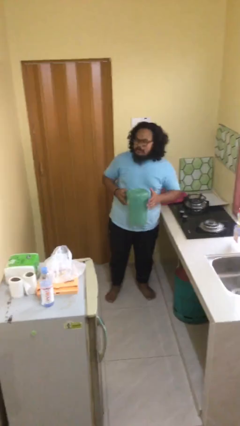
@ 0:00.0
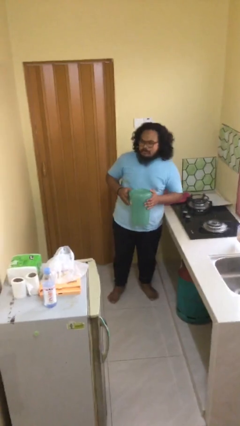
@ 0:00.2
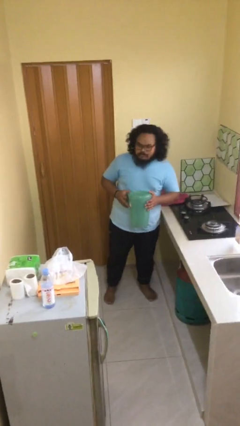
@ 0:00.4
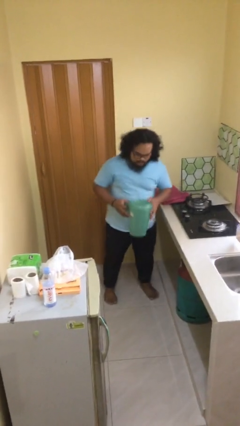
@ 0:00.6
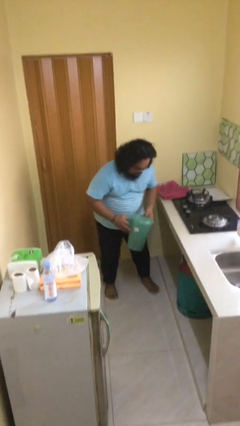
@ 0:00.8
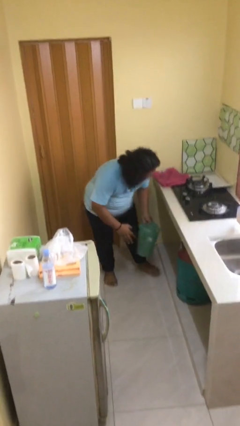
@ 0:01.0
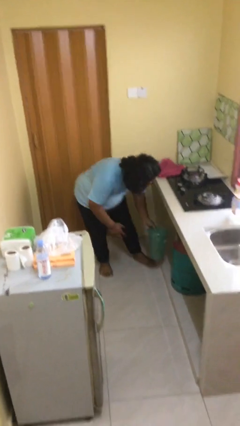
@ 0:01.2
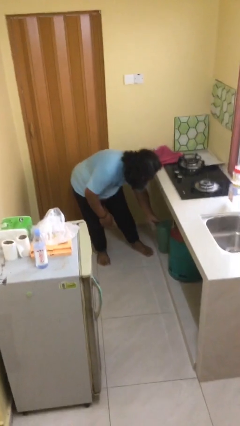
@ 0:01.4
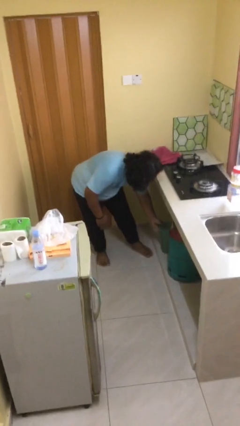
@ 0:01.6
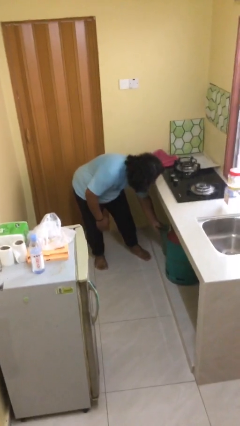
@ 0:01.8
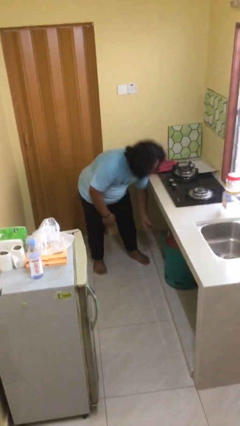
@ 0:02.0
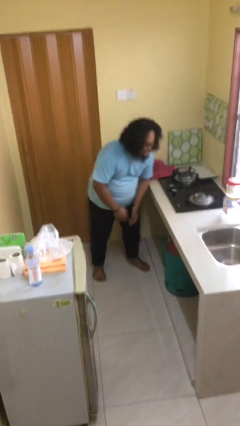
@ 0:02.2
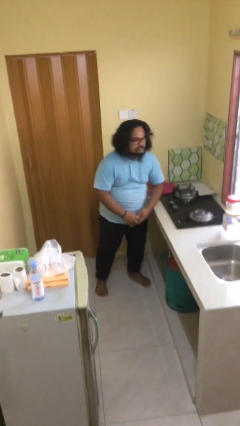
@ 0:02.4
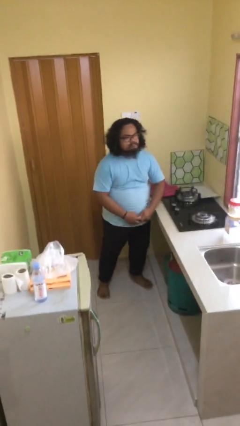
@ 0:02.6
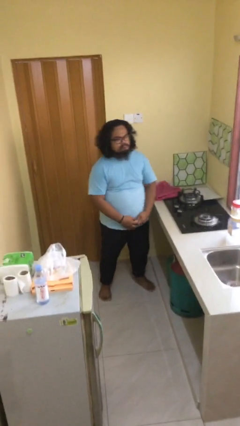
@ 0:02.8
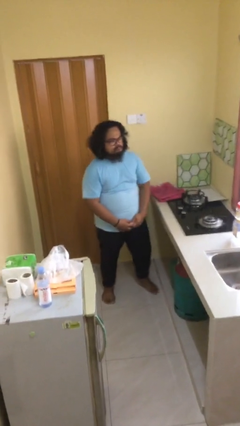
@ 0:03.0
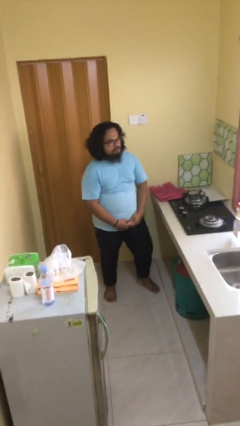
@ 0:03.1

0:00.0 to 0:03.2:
person puts down object into cabinet

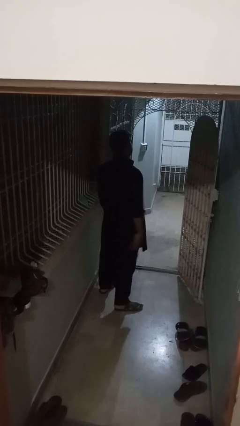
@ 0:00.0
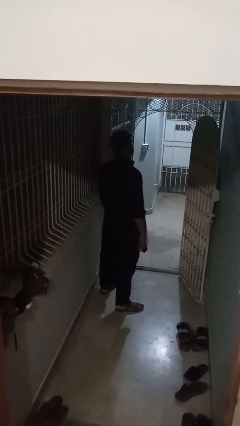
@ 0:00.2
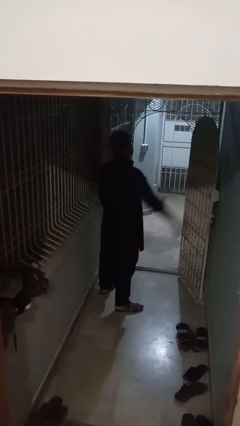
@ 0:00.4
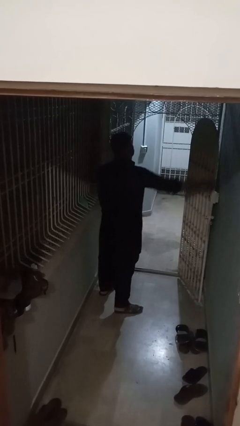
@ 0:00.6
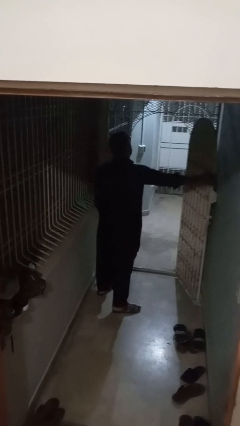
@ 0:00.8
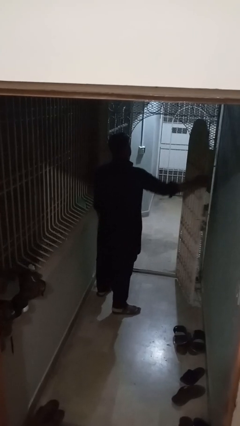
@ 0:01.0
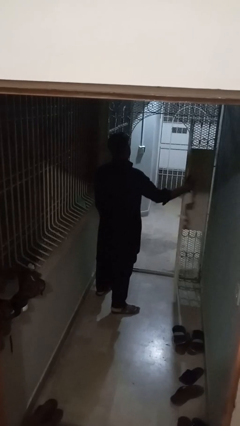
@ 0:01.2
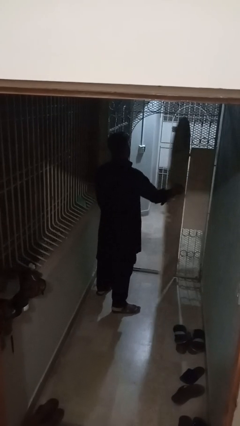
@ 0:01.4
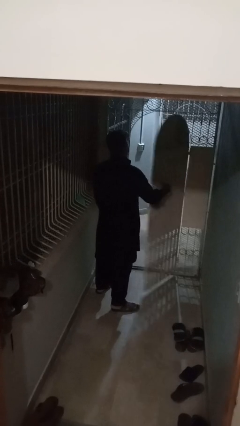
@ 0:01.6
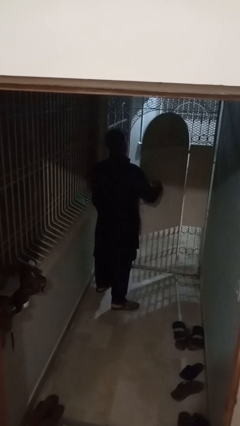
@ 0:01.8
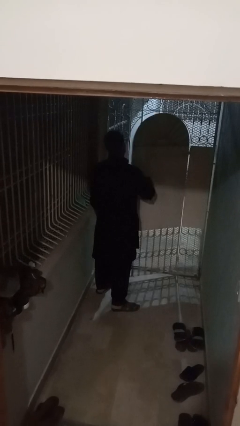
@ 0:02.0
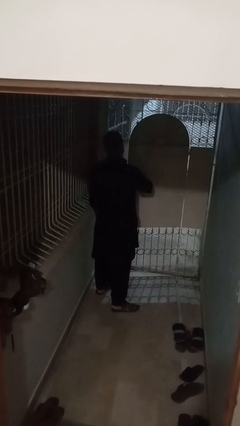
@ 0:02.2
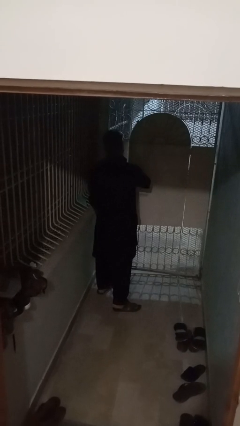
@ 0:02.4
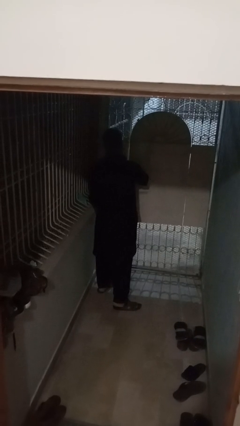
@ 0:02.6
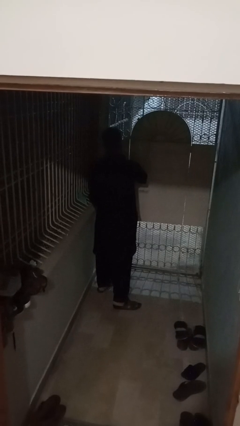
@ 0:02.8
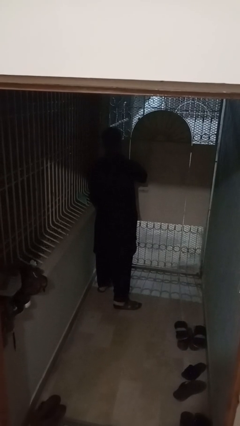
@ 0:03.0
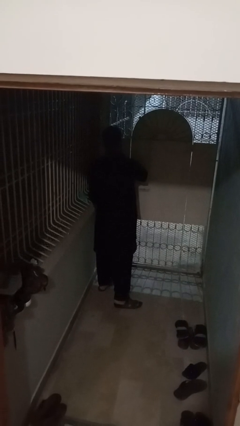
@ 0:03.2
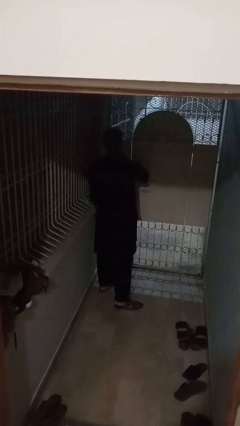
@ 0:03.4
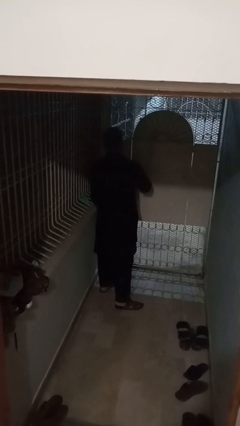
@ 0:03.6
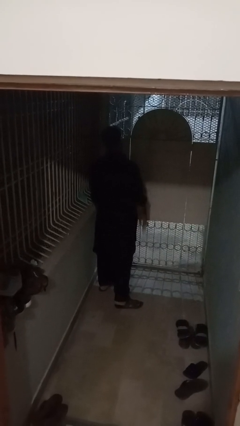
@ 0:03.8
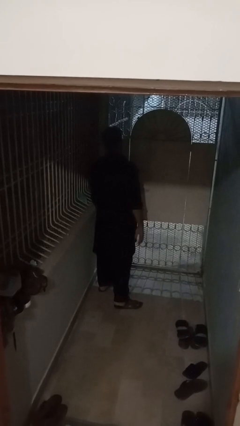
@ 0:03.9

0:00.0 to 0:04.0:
person closes gate

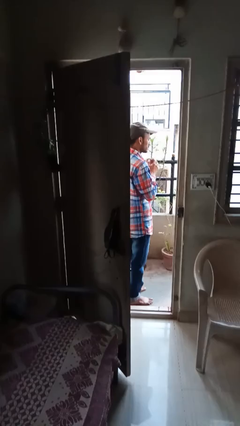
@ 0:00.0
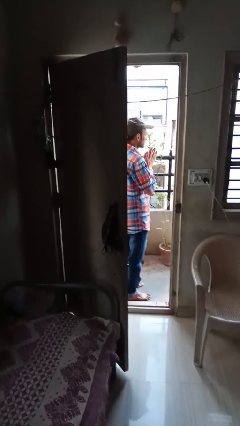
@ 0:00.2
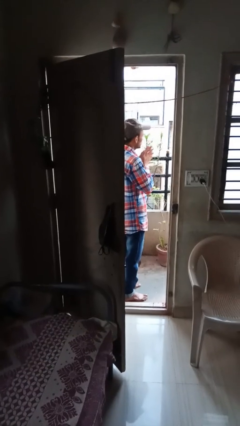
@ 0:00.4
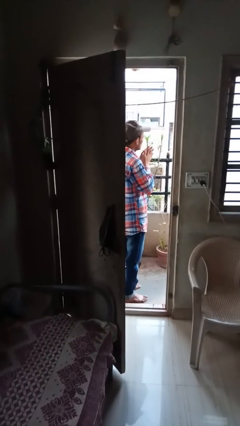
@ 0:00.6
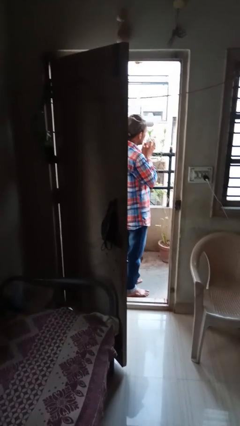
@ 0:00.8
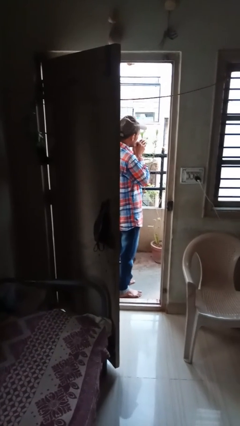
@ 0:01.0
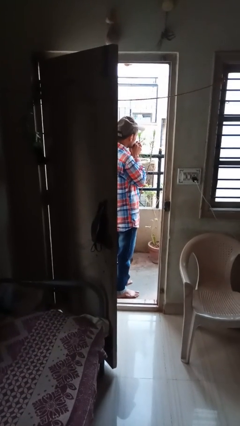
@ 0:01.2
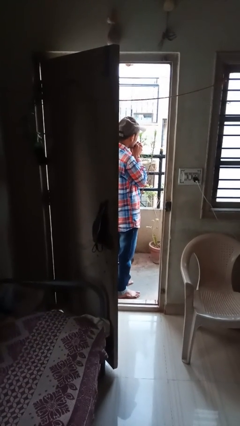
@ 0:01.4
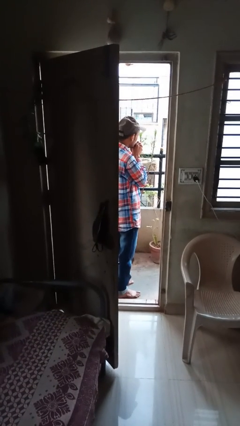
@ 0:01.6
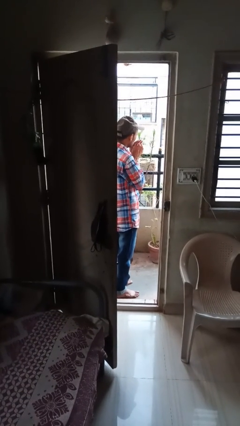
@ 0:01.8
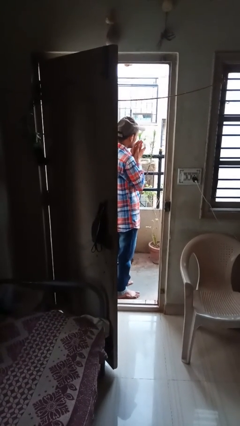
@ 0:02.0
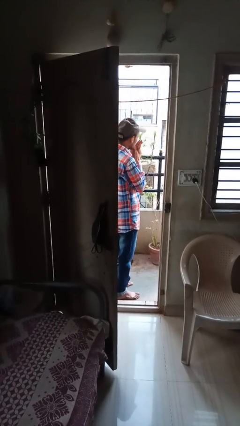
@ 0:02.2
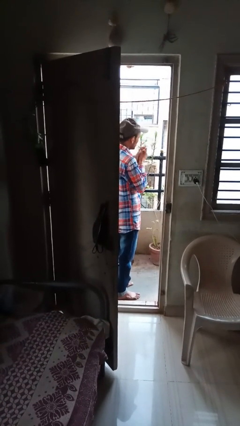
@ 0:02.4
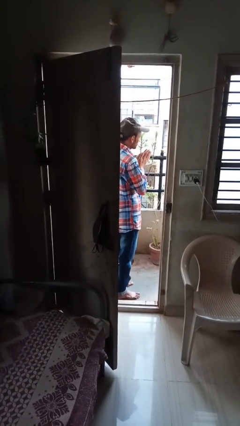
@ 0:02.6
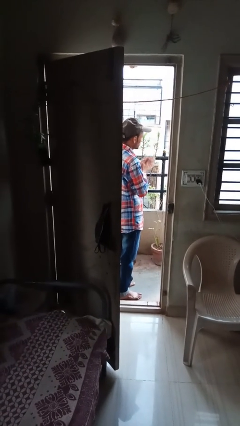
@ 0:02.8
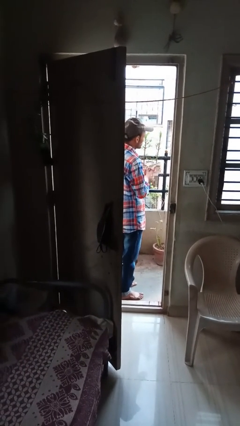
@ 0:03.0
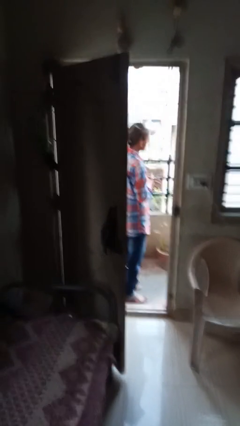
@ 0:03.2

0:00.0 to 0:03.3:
person blows into hands

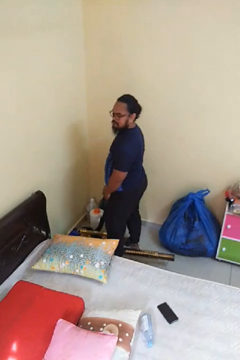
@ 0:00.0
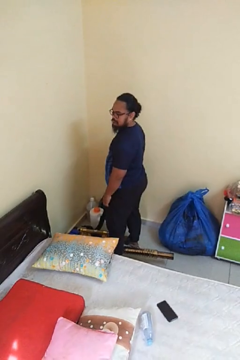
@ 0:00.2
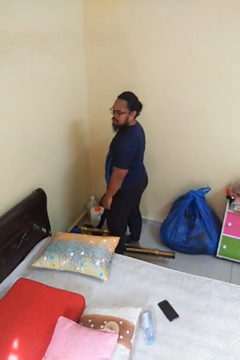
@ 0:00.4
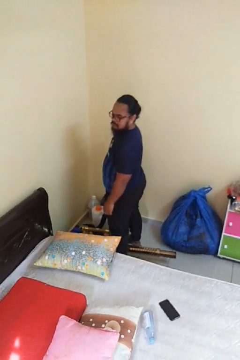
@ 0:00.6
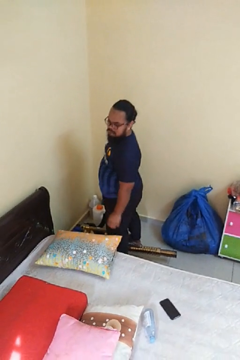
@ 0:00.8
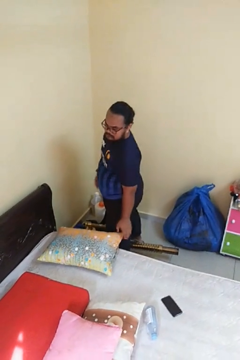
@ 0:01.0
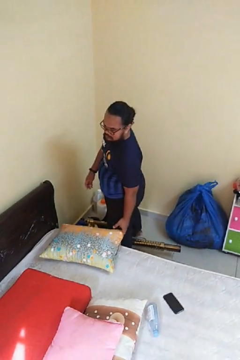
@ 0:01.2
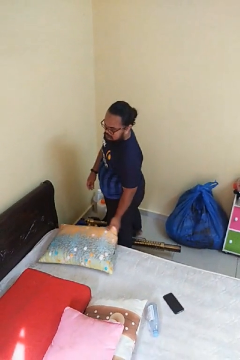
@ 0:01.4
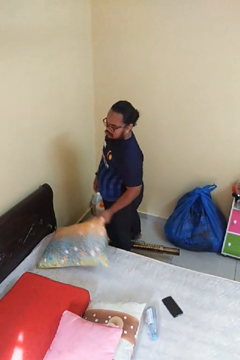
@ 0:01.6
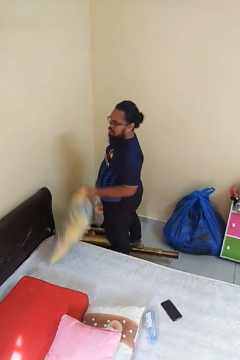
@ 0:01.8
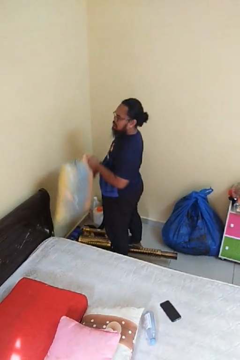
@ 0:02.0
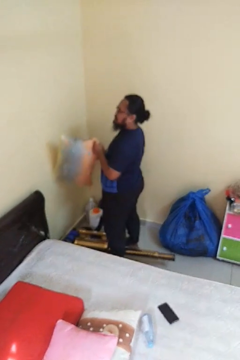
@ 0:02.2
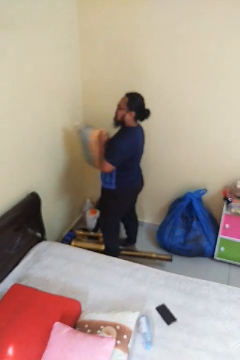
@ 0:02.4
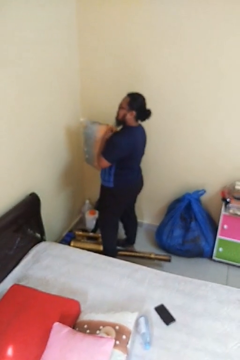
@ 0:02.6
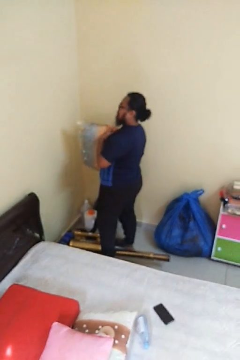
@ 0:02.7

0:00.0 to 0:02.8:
person picks up object from bed

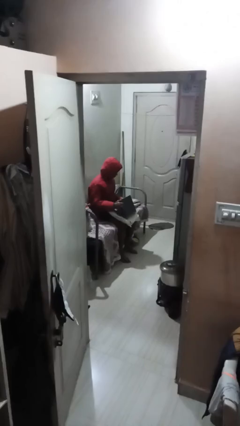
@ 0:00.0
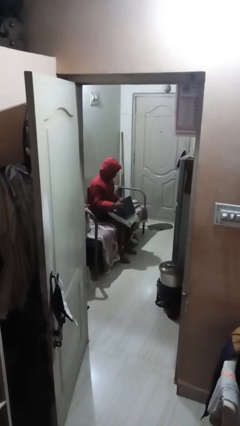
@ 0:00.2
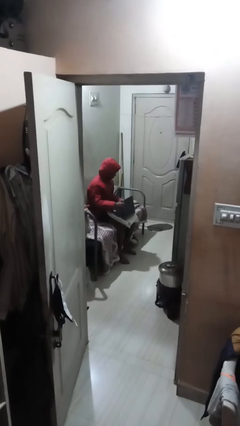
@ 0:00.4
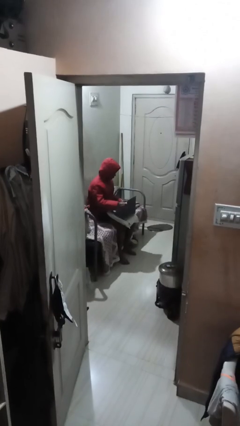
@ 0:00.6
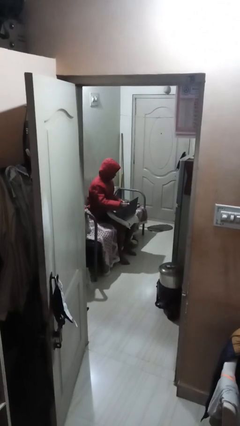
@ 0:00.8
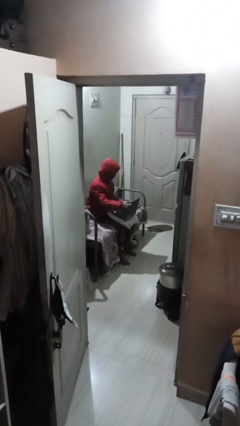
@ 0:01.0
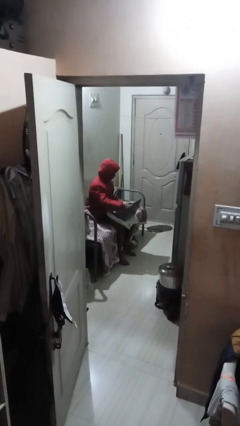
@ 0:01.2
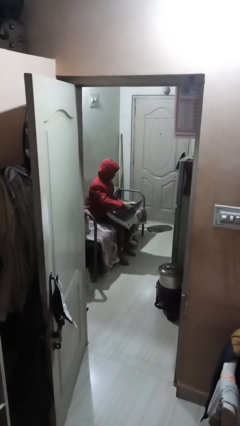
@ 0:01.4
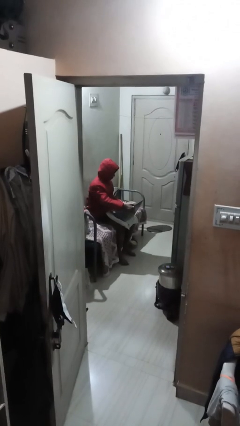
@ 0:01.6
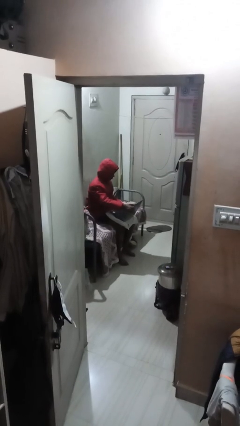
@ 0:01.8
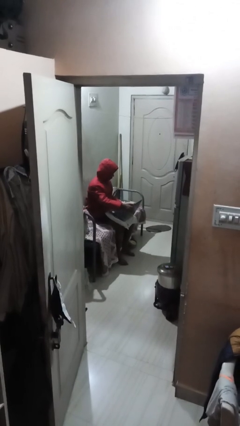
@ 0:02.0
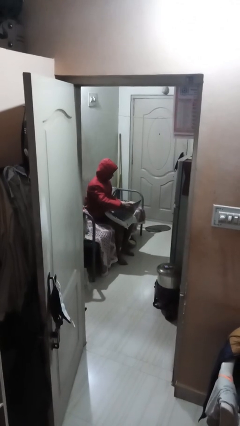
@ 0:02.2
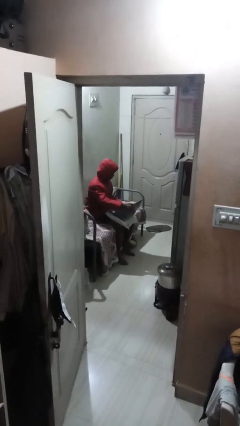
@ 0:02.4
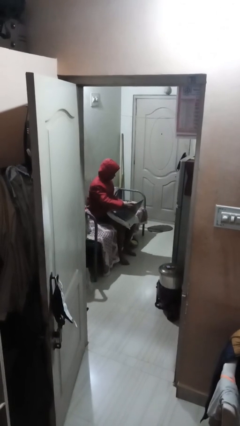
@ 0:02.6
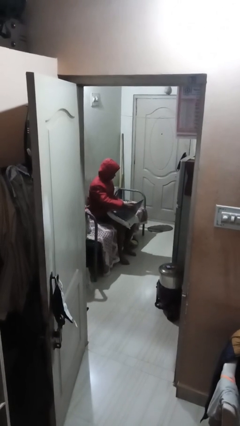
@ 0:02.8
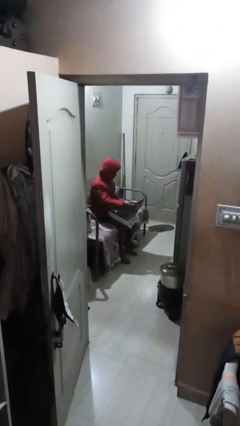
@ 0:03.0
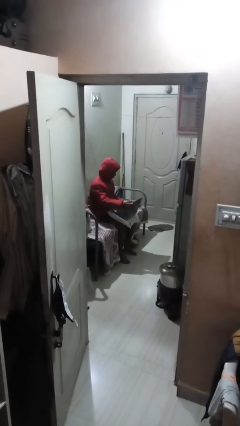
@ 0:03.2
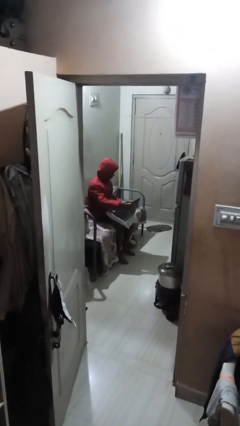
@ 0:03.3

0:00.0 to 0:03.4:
person interacts with laptop

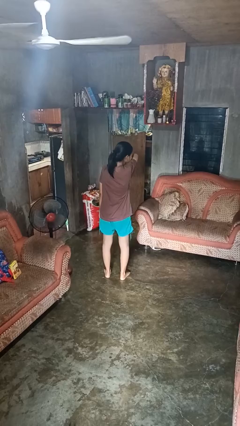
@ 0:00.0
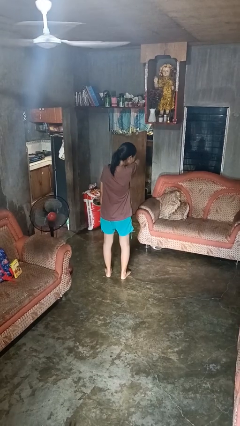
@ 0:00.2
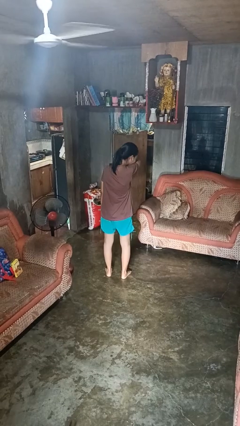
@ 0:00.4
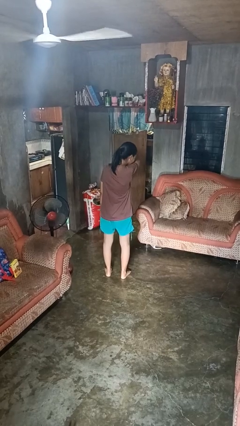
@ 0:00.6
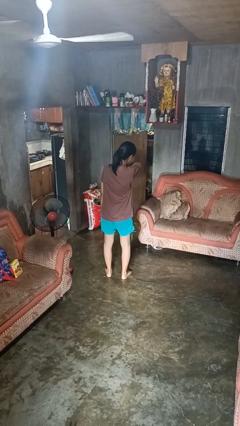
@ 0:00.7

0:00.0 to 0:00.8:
person sneezes into arm

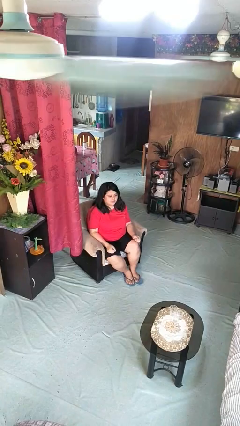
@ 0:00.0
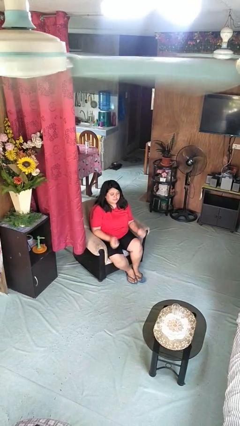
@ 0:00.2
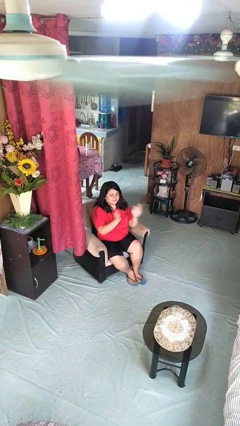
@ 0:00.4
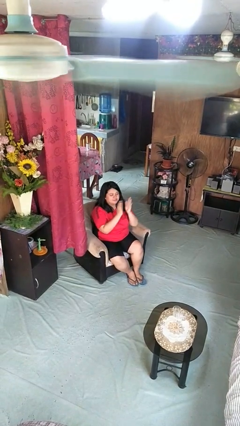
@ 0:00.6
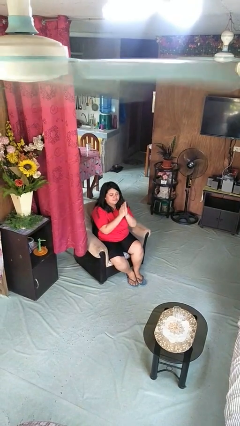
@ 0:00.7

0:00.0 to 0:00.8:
person claps hands
